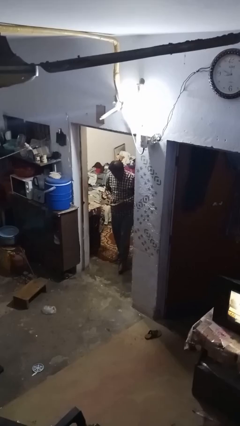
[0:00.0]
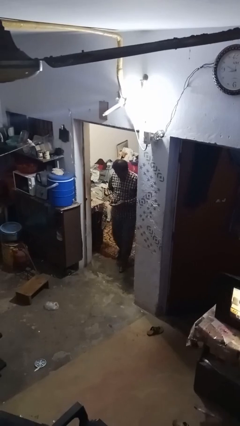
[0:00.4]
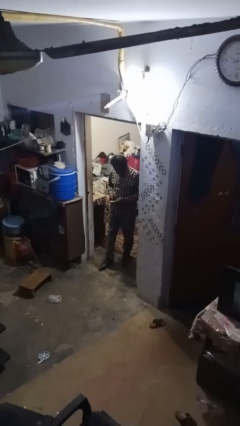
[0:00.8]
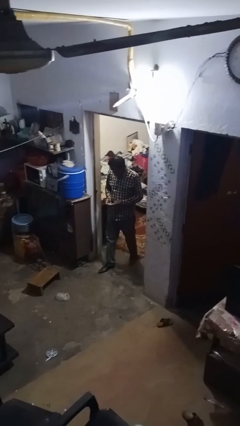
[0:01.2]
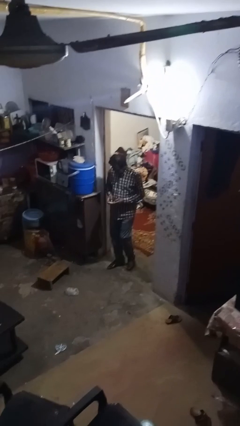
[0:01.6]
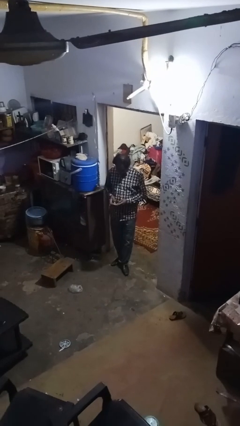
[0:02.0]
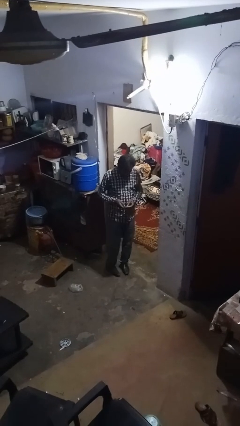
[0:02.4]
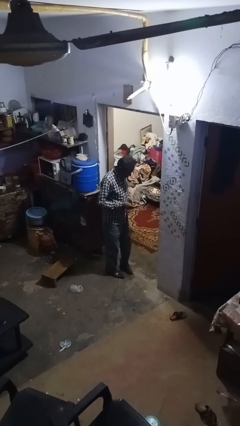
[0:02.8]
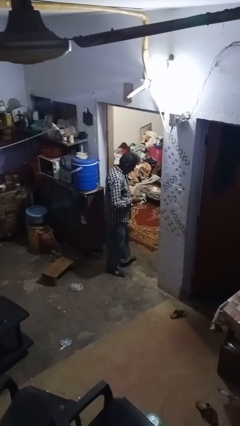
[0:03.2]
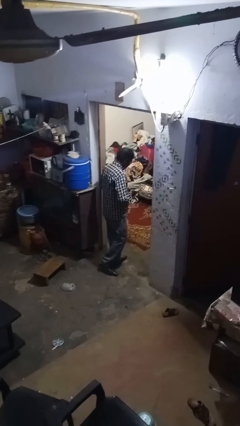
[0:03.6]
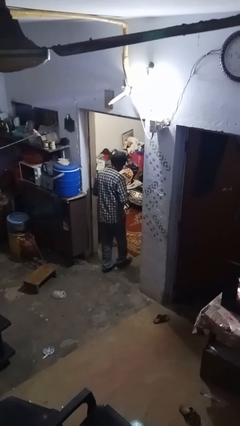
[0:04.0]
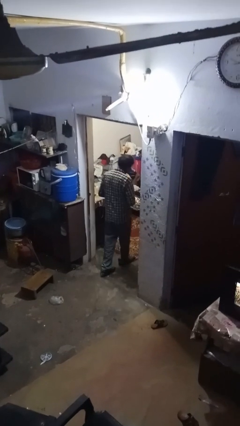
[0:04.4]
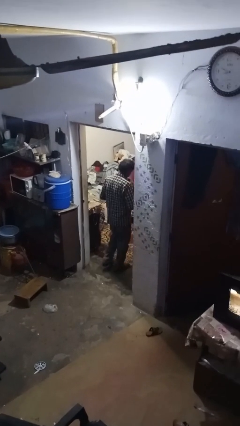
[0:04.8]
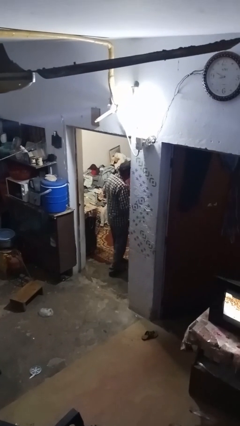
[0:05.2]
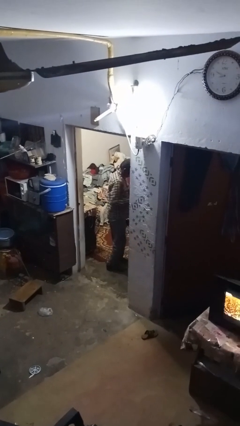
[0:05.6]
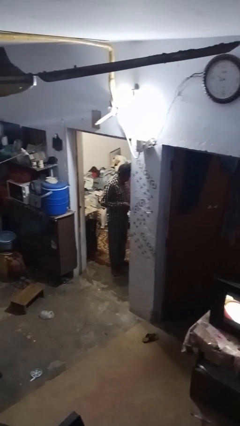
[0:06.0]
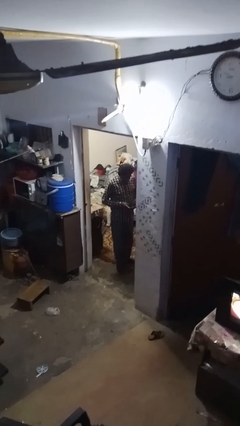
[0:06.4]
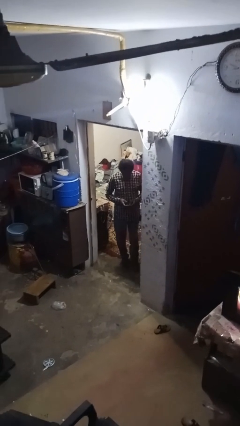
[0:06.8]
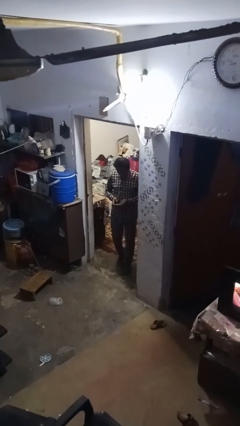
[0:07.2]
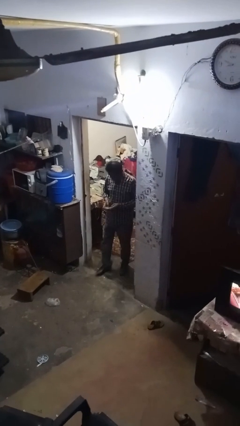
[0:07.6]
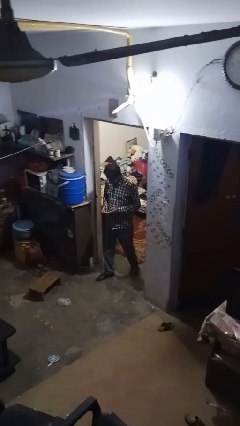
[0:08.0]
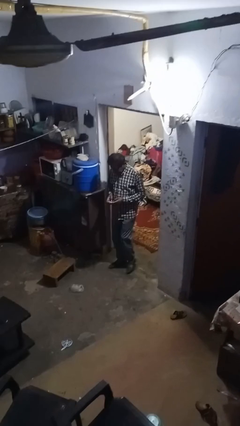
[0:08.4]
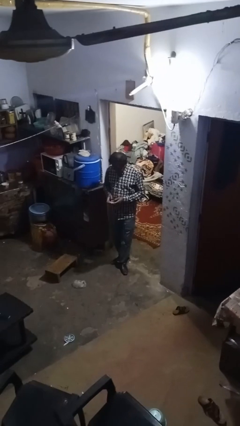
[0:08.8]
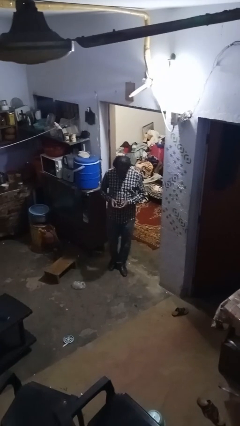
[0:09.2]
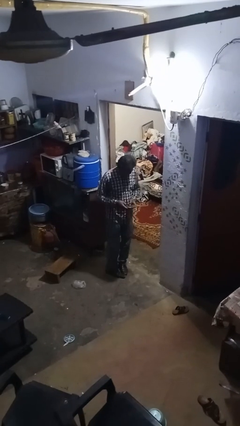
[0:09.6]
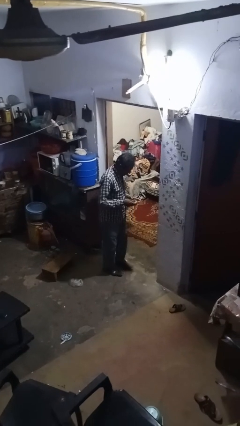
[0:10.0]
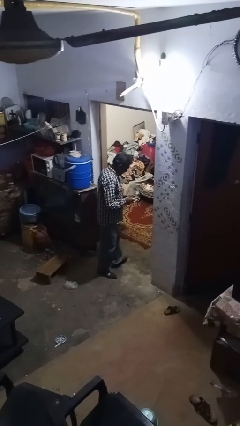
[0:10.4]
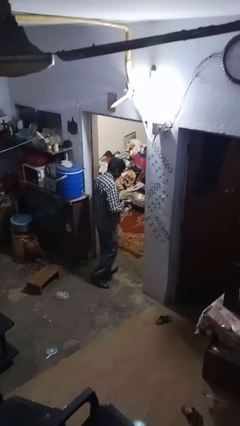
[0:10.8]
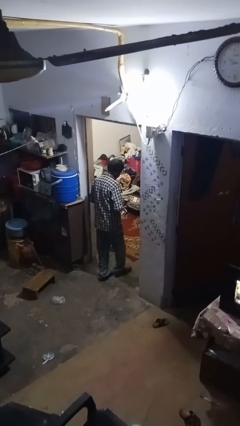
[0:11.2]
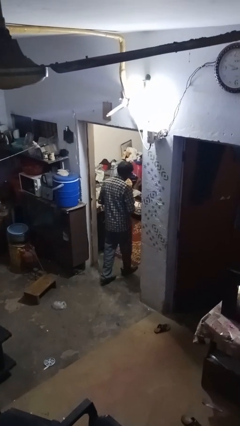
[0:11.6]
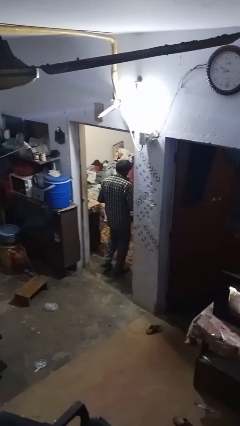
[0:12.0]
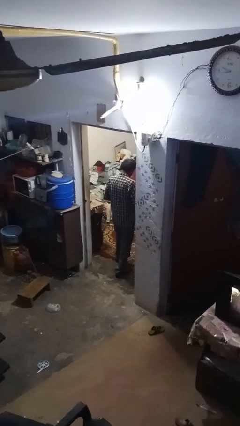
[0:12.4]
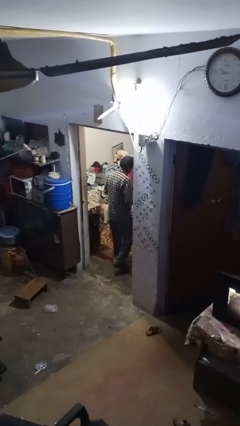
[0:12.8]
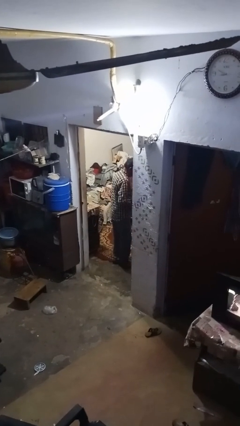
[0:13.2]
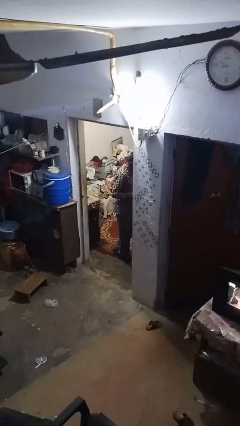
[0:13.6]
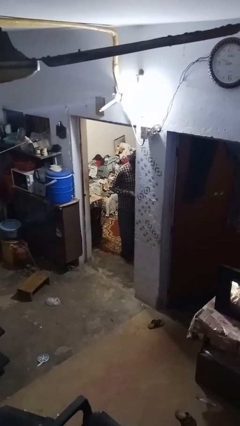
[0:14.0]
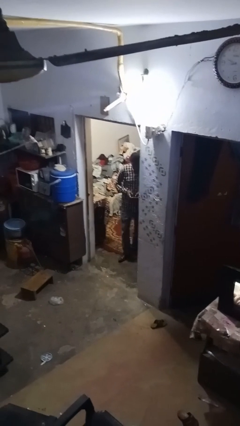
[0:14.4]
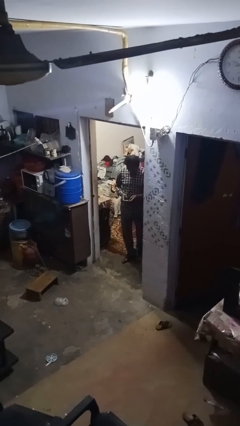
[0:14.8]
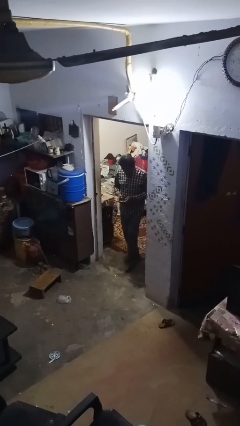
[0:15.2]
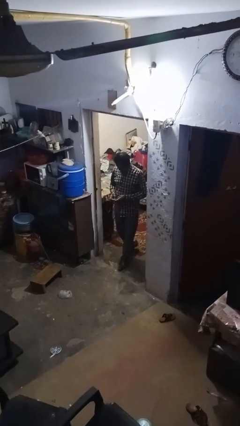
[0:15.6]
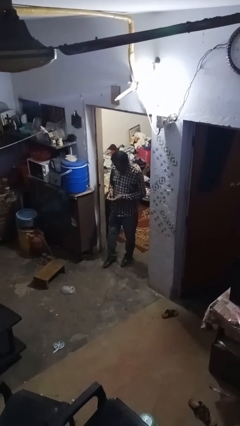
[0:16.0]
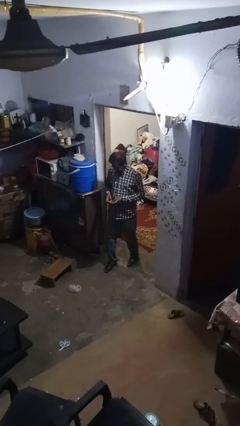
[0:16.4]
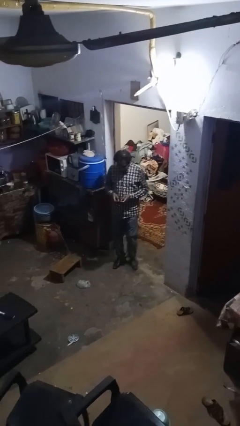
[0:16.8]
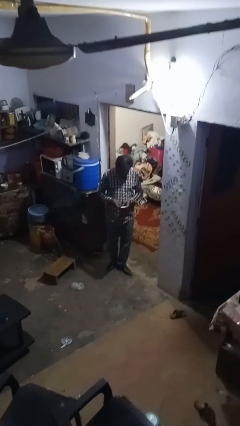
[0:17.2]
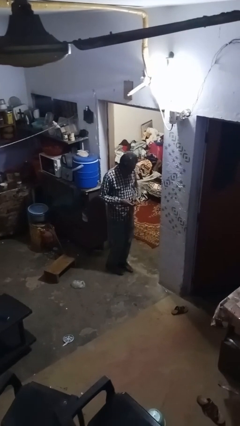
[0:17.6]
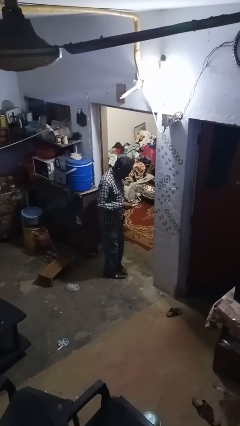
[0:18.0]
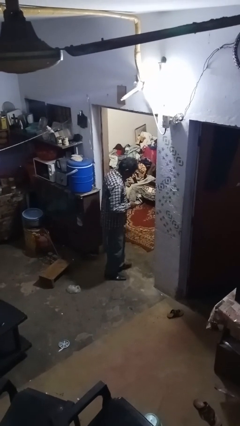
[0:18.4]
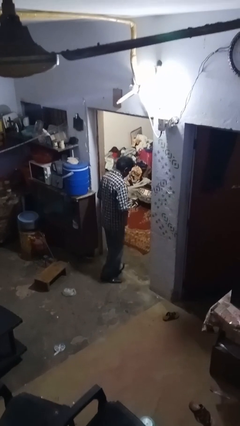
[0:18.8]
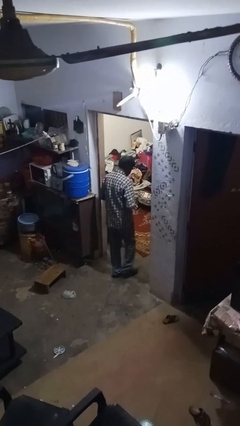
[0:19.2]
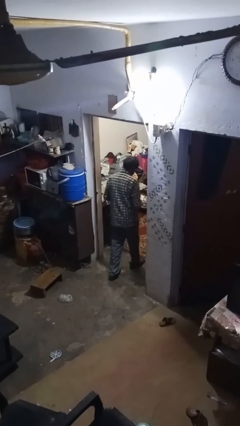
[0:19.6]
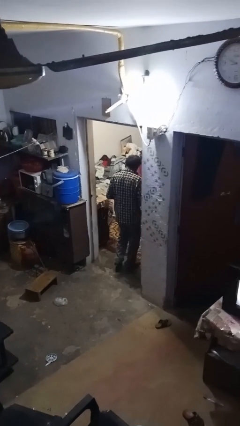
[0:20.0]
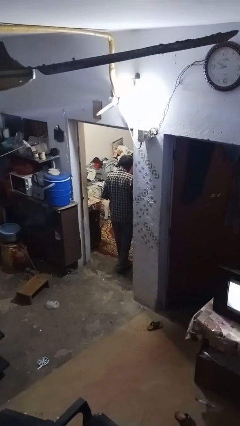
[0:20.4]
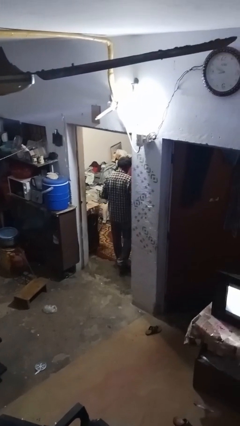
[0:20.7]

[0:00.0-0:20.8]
person texts on phone

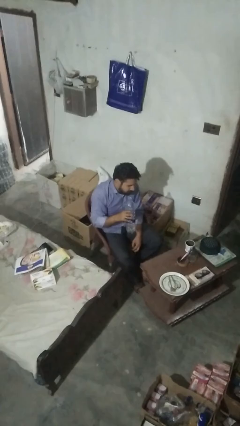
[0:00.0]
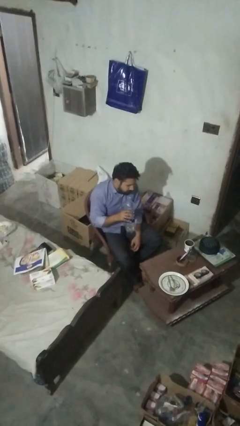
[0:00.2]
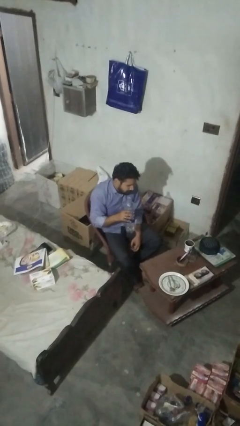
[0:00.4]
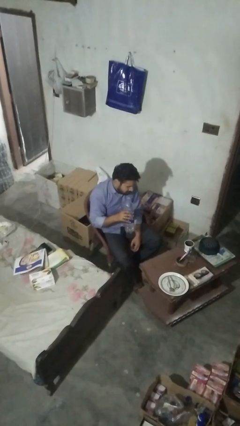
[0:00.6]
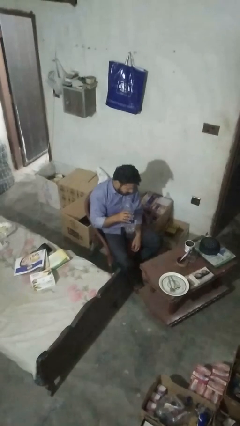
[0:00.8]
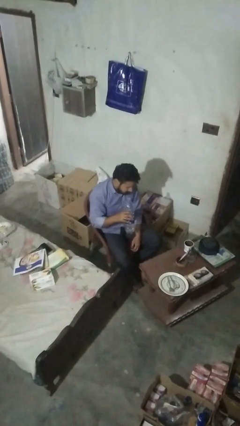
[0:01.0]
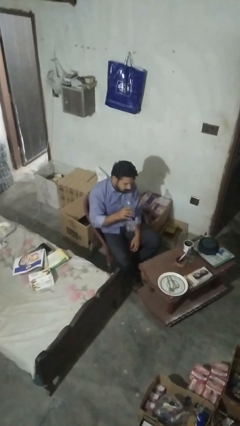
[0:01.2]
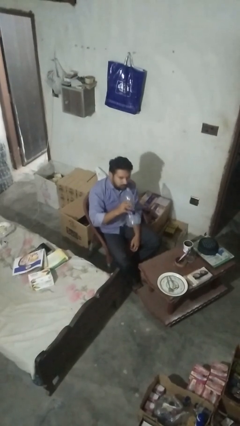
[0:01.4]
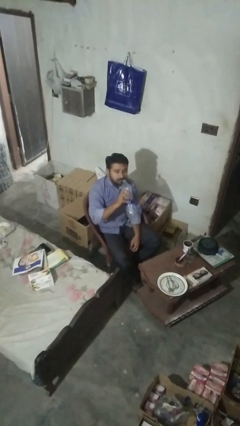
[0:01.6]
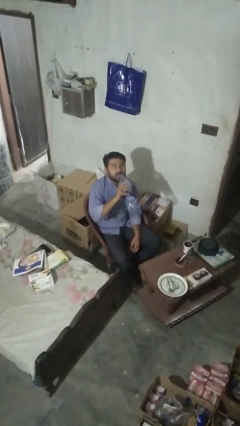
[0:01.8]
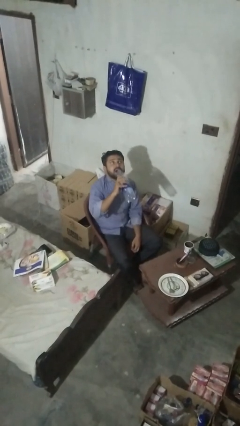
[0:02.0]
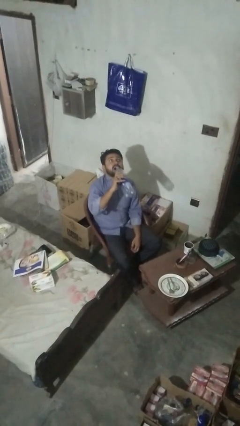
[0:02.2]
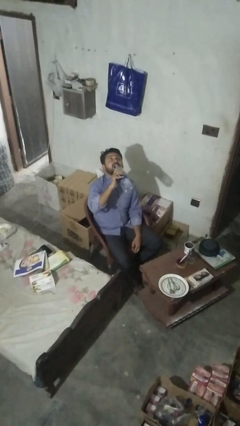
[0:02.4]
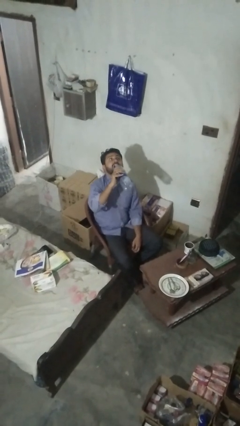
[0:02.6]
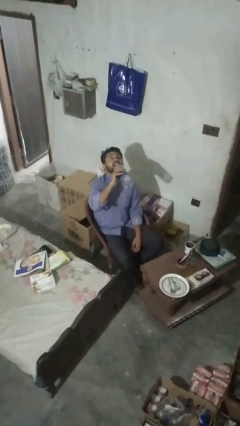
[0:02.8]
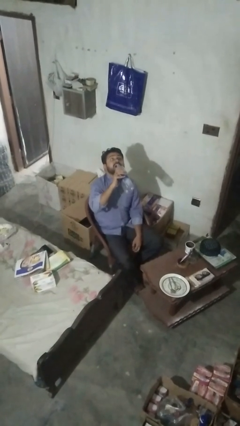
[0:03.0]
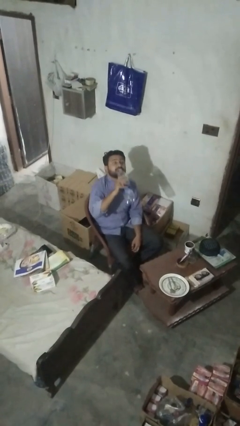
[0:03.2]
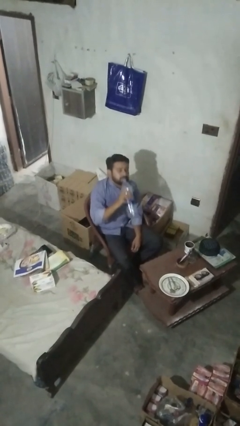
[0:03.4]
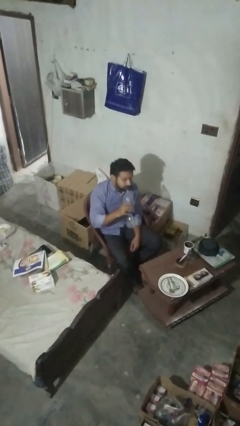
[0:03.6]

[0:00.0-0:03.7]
person drinks from bottle

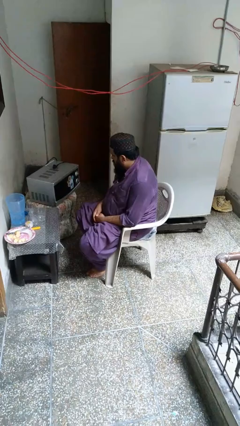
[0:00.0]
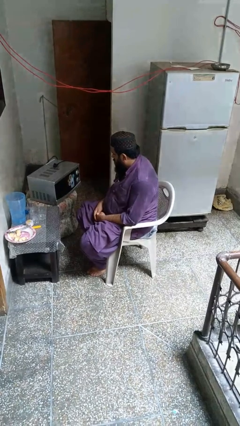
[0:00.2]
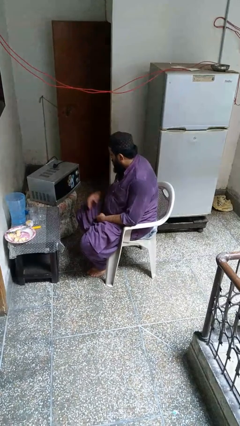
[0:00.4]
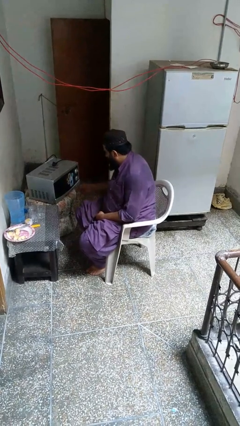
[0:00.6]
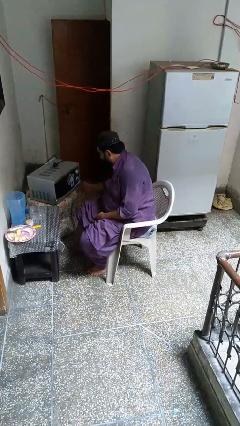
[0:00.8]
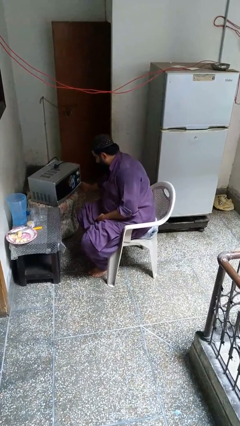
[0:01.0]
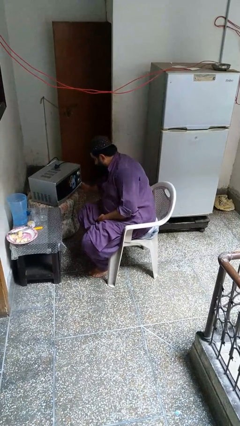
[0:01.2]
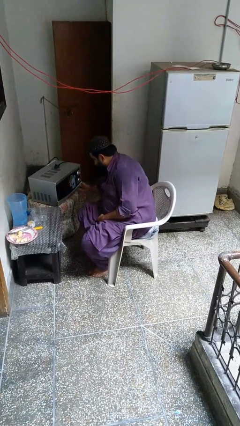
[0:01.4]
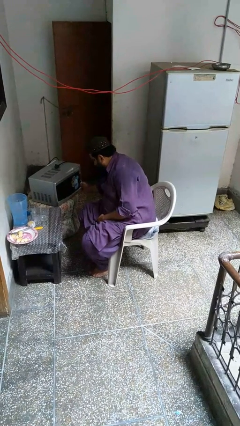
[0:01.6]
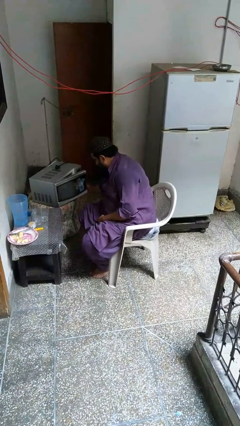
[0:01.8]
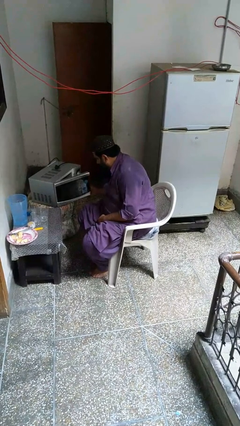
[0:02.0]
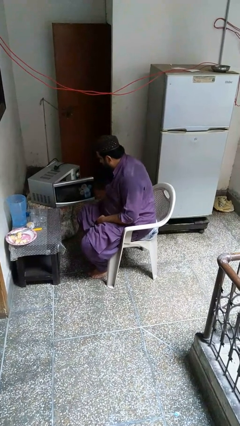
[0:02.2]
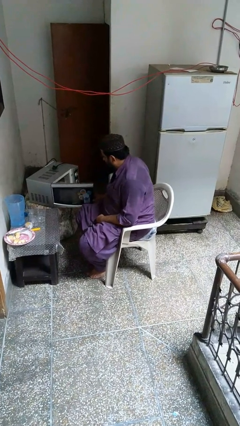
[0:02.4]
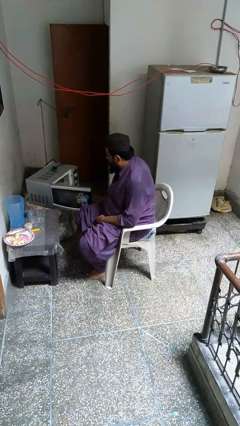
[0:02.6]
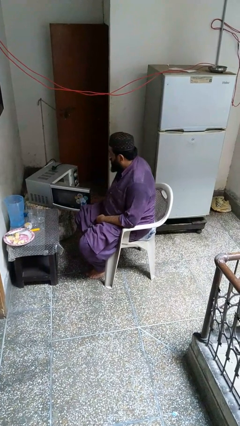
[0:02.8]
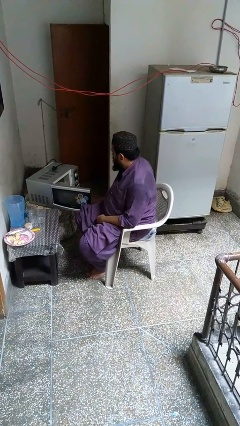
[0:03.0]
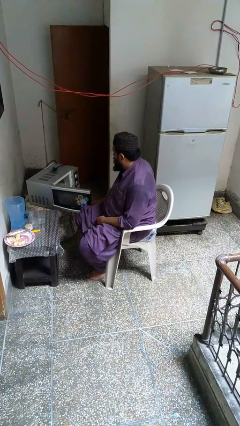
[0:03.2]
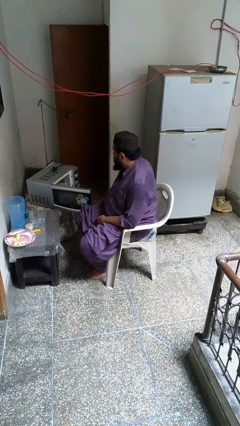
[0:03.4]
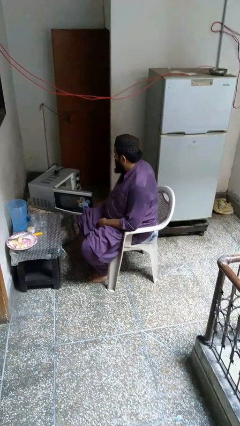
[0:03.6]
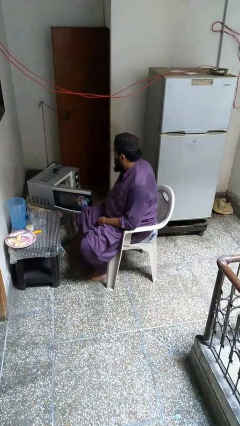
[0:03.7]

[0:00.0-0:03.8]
person opens microwave
